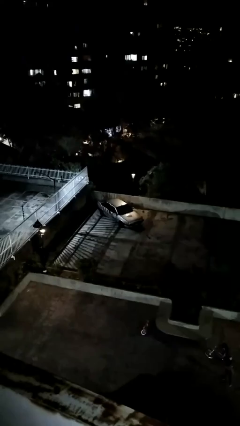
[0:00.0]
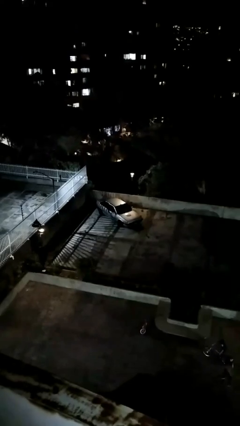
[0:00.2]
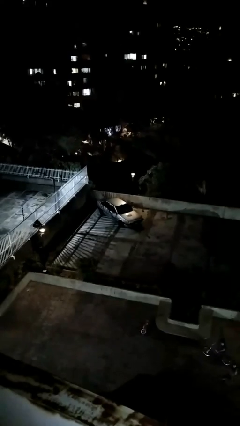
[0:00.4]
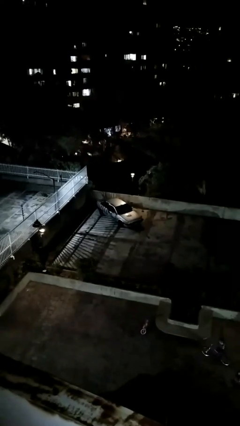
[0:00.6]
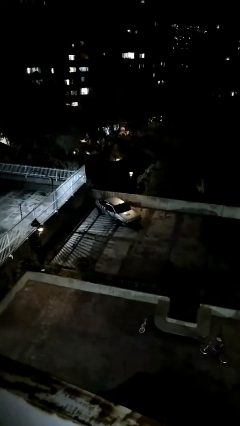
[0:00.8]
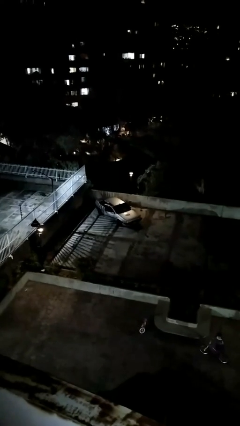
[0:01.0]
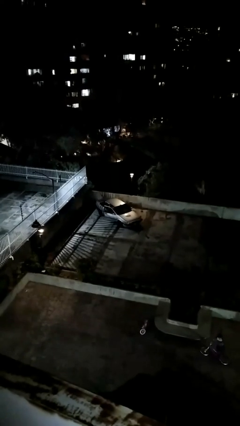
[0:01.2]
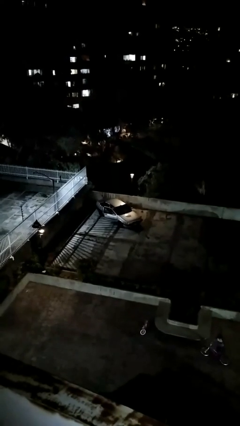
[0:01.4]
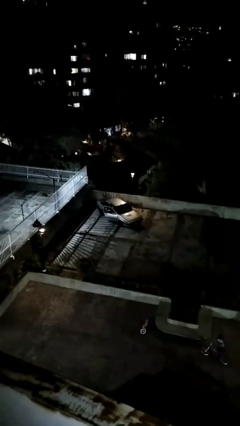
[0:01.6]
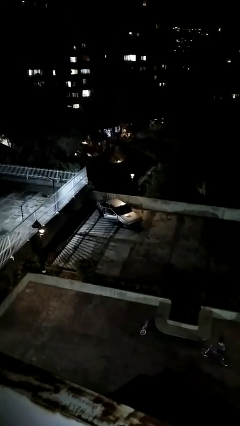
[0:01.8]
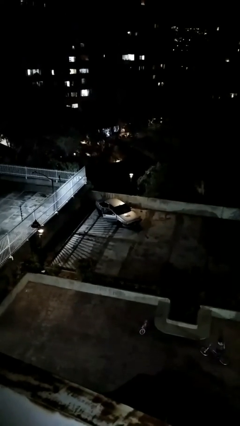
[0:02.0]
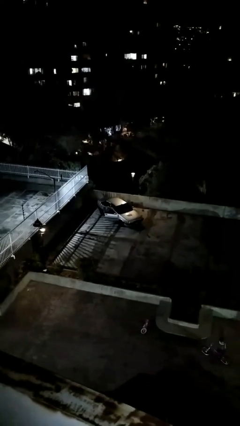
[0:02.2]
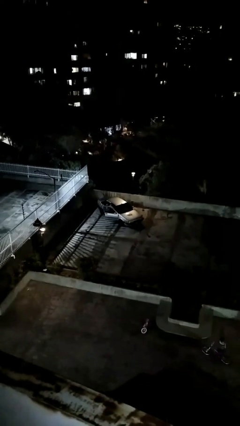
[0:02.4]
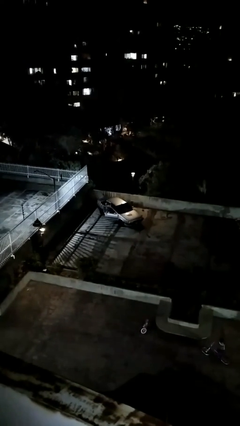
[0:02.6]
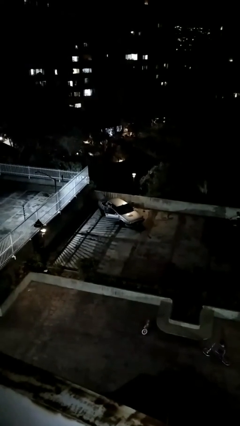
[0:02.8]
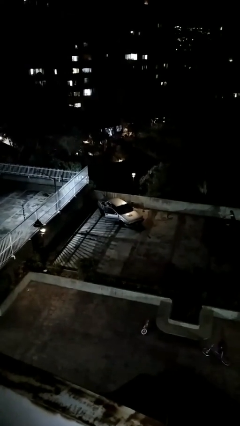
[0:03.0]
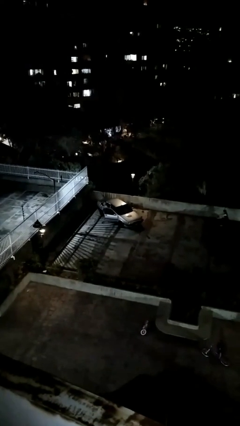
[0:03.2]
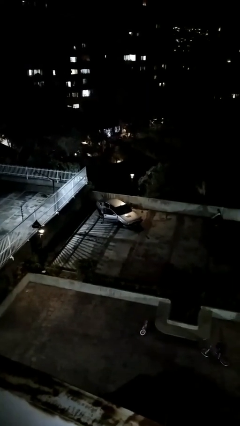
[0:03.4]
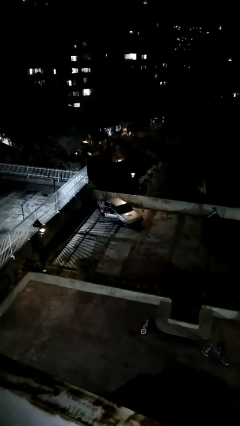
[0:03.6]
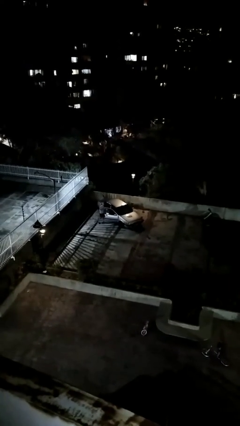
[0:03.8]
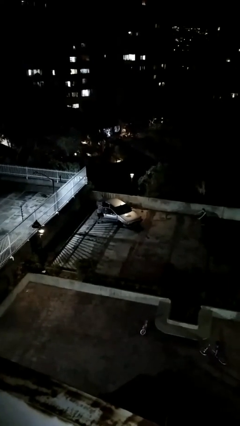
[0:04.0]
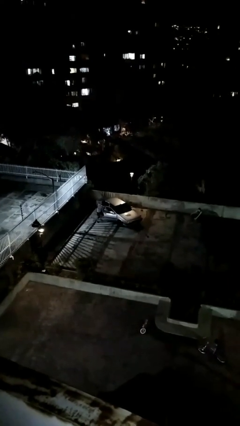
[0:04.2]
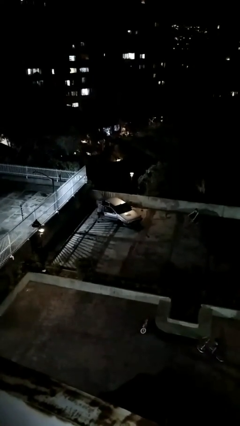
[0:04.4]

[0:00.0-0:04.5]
car drops off person

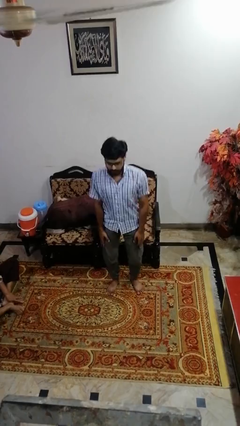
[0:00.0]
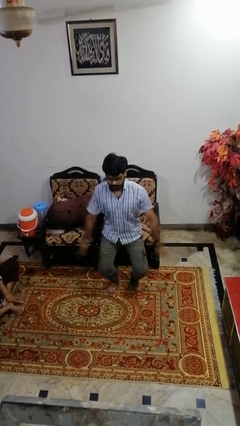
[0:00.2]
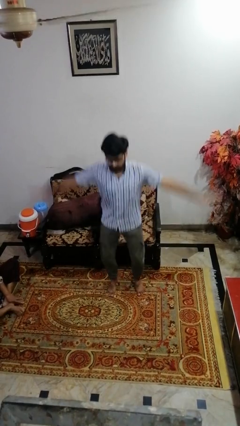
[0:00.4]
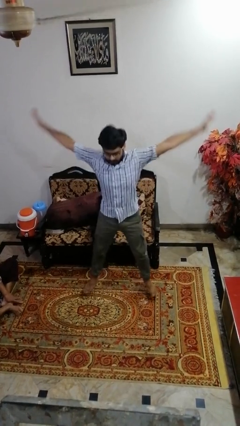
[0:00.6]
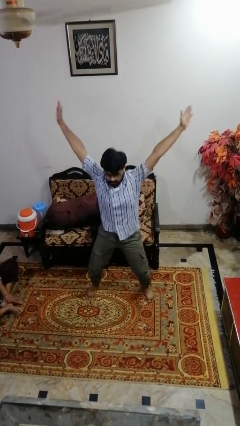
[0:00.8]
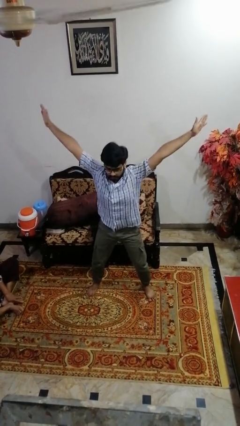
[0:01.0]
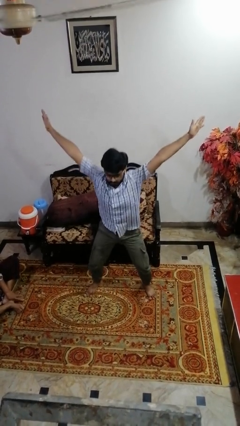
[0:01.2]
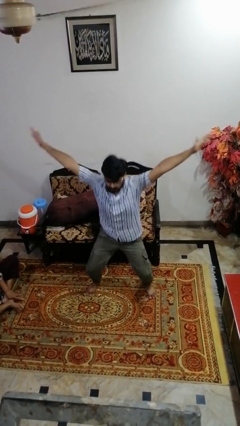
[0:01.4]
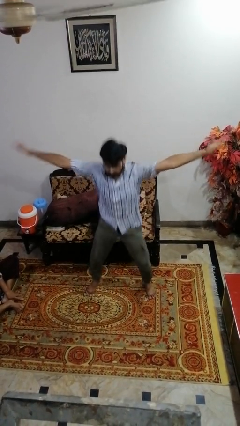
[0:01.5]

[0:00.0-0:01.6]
person exercises with jumping jacks

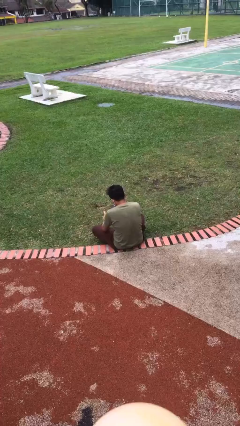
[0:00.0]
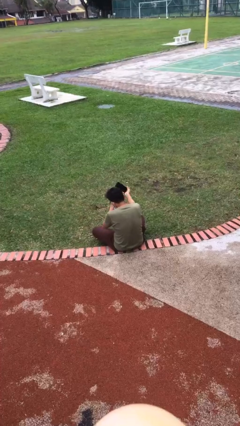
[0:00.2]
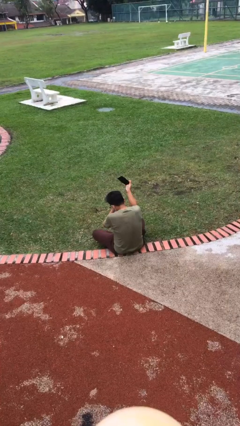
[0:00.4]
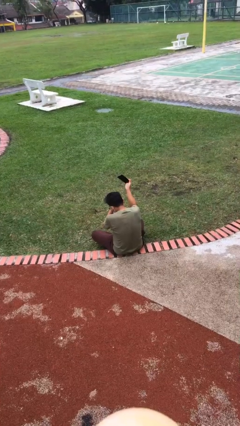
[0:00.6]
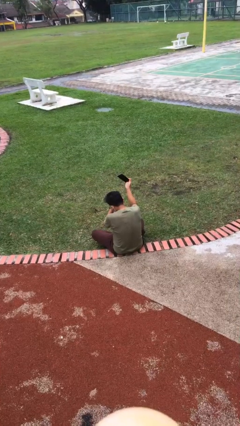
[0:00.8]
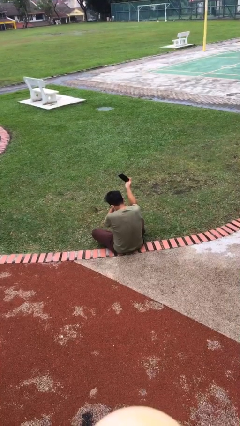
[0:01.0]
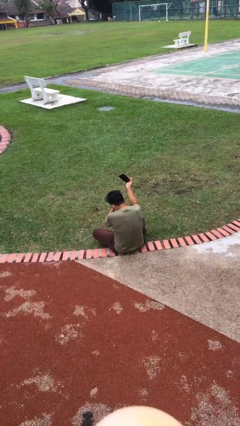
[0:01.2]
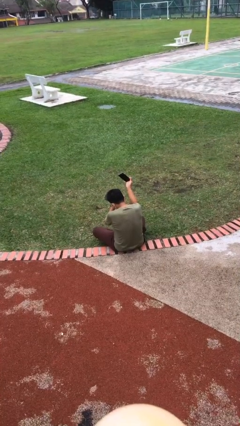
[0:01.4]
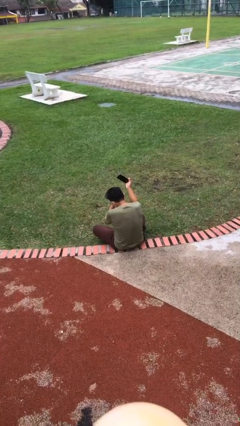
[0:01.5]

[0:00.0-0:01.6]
person takes selfie

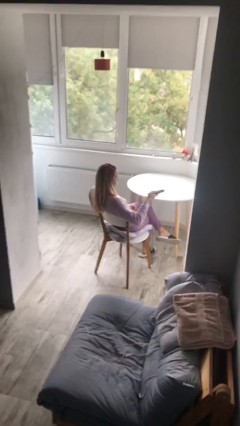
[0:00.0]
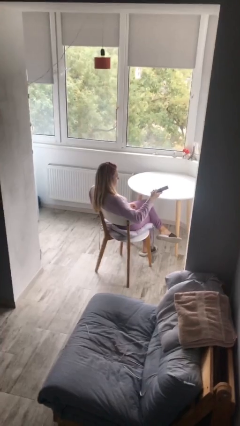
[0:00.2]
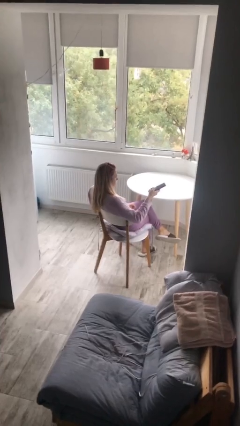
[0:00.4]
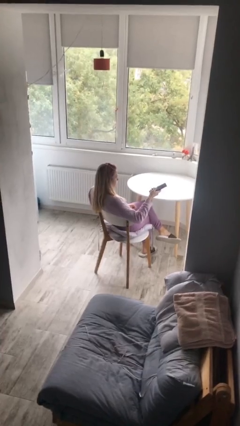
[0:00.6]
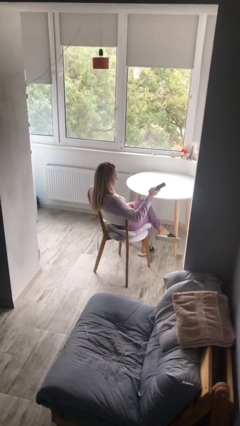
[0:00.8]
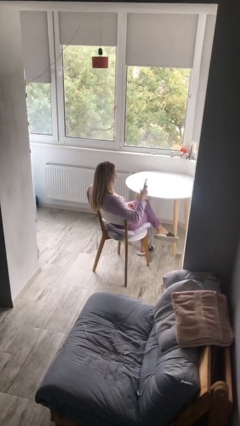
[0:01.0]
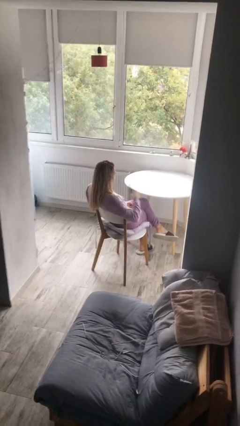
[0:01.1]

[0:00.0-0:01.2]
person uses television remote

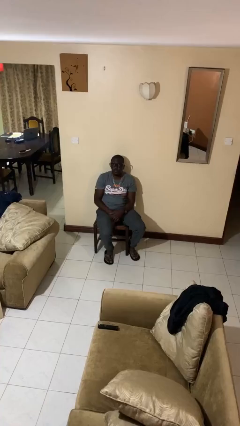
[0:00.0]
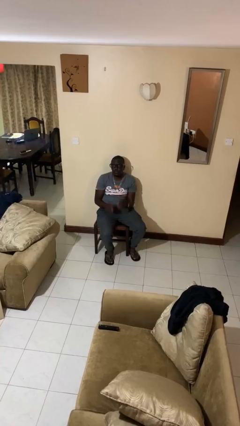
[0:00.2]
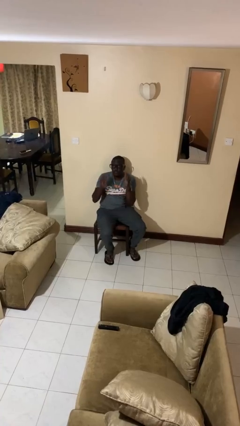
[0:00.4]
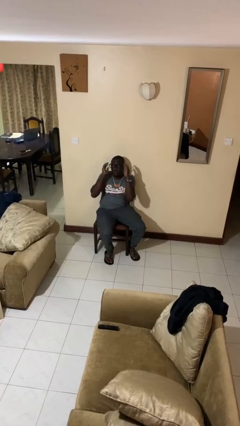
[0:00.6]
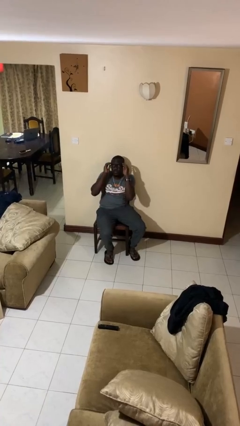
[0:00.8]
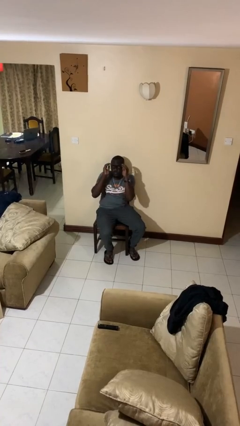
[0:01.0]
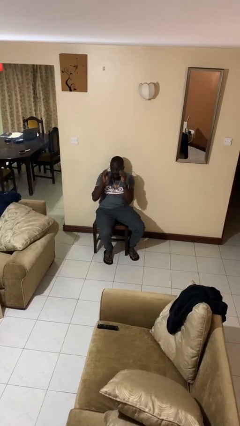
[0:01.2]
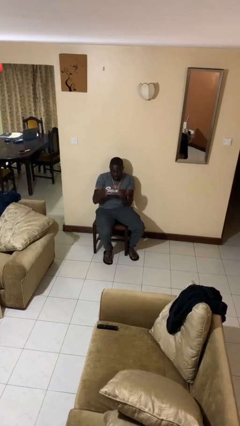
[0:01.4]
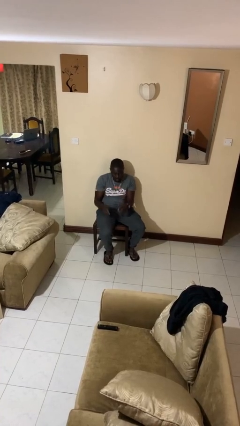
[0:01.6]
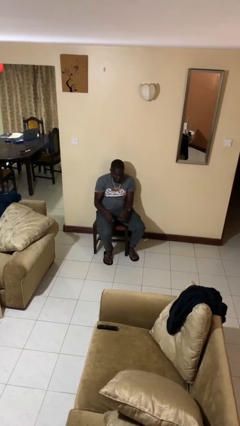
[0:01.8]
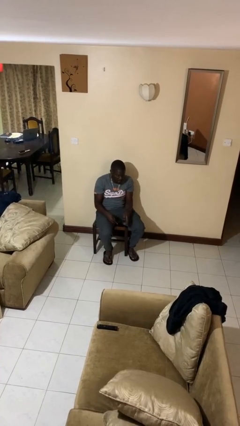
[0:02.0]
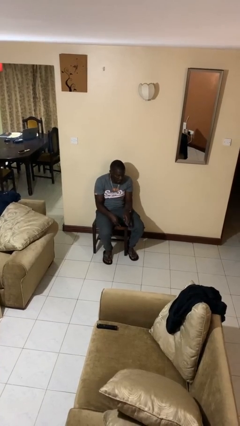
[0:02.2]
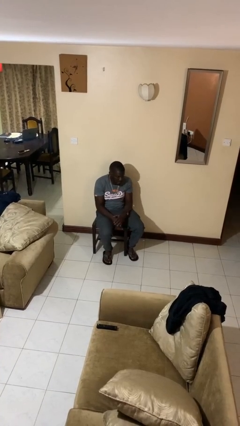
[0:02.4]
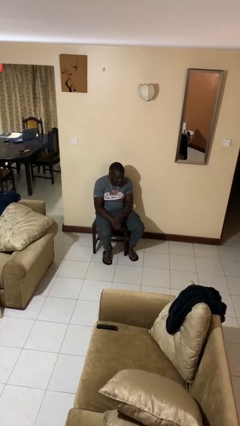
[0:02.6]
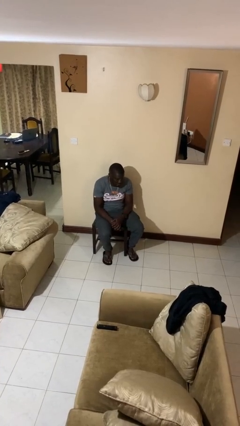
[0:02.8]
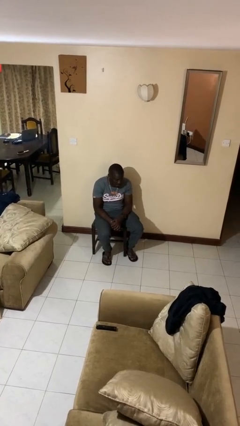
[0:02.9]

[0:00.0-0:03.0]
person takes off glasses

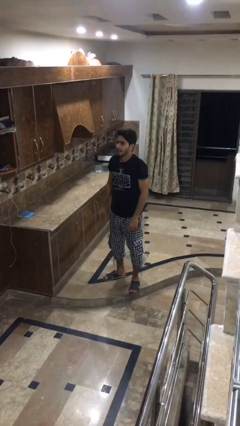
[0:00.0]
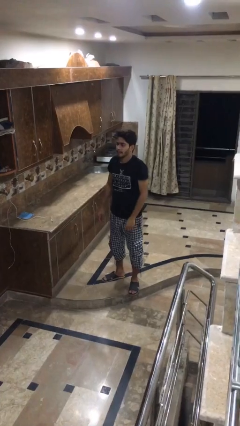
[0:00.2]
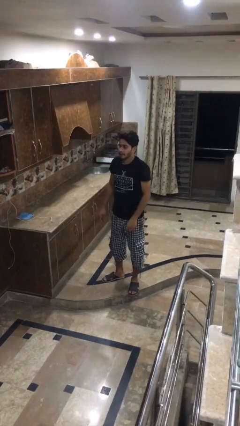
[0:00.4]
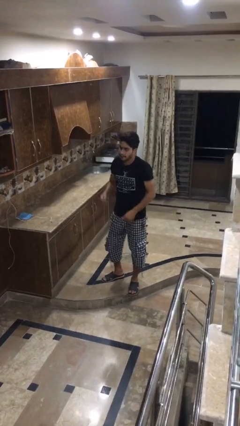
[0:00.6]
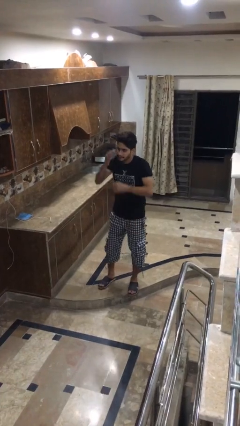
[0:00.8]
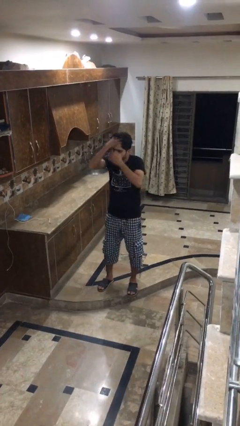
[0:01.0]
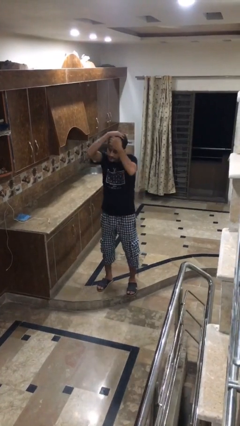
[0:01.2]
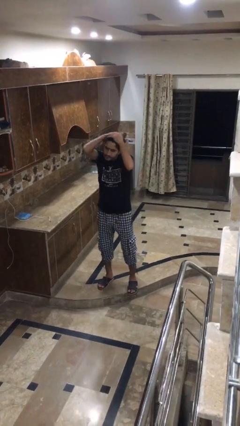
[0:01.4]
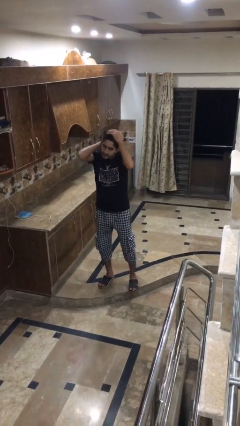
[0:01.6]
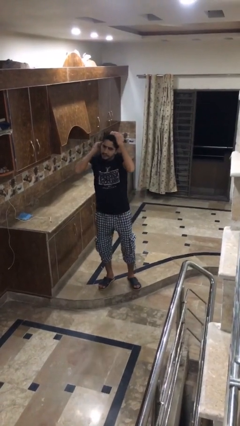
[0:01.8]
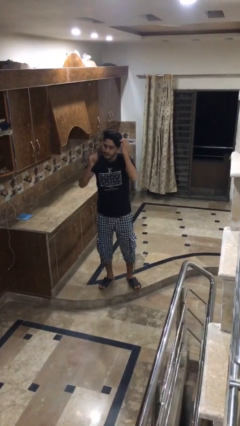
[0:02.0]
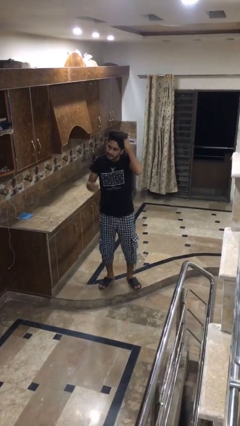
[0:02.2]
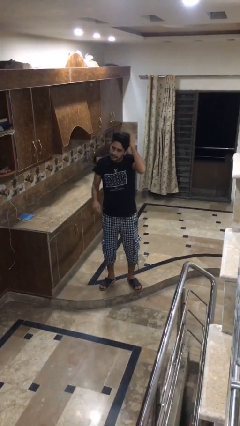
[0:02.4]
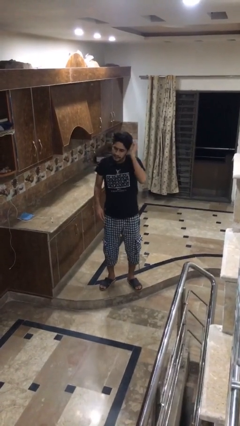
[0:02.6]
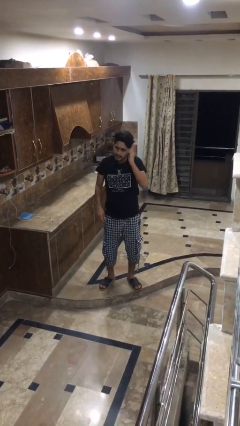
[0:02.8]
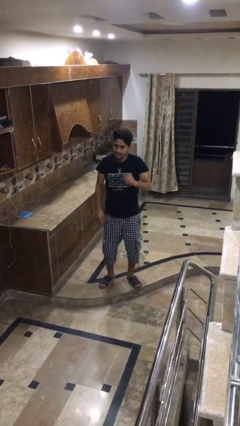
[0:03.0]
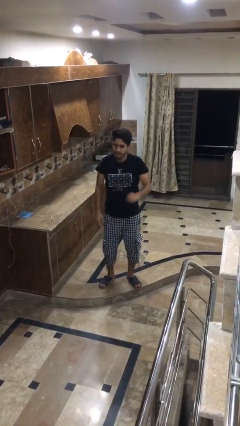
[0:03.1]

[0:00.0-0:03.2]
person strokes hair

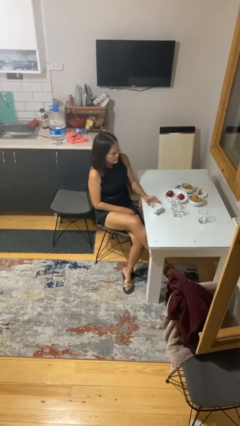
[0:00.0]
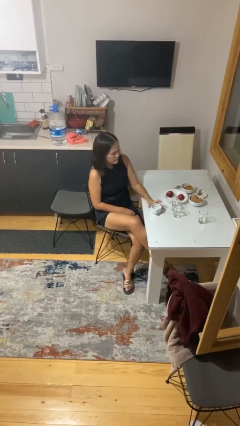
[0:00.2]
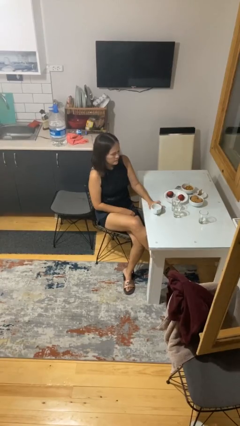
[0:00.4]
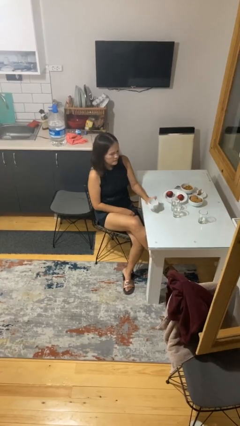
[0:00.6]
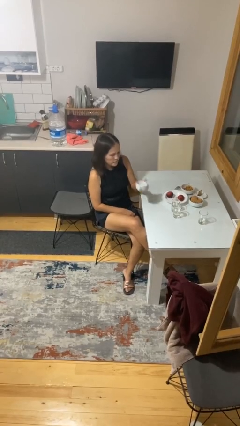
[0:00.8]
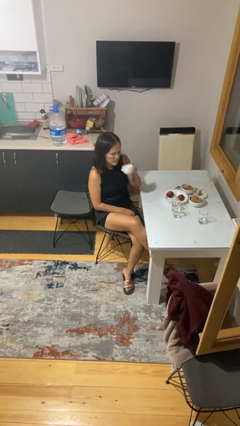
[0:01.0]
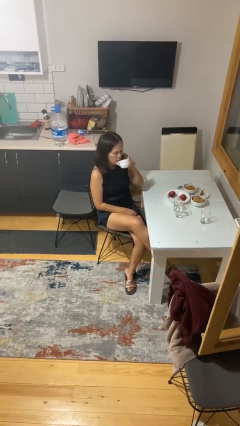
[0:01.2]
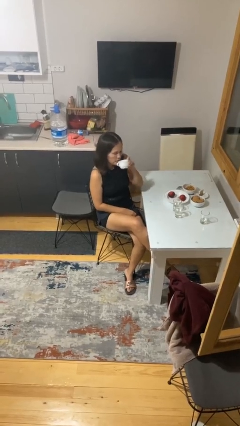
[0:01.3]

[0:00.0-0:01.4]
person picks up object from table

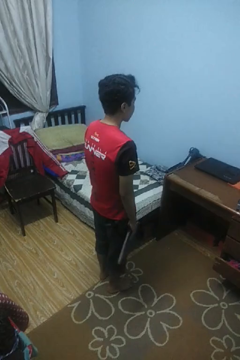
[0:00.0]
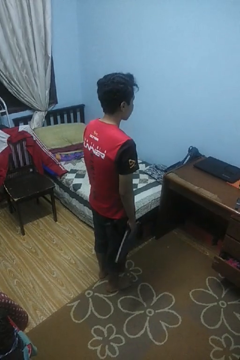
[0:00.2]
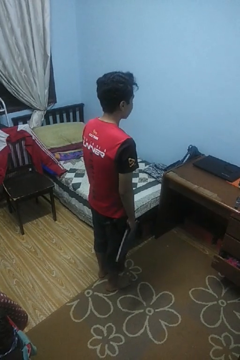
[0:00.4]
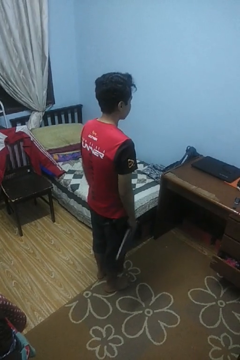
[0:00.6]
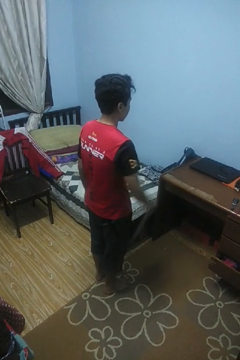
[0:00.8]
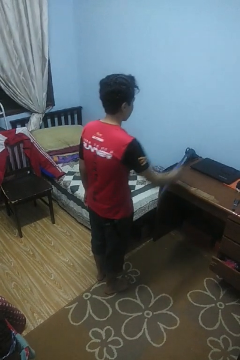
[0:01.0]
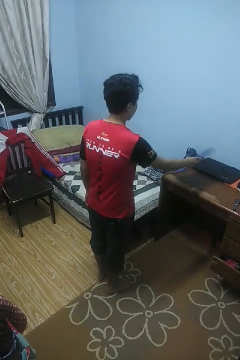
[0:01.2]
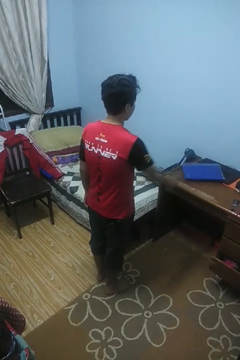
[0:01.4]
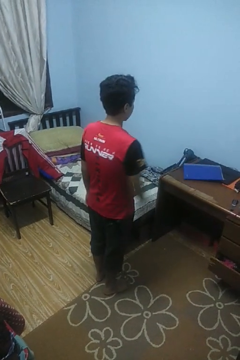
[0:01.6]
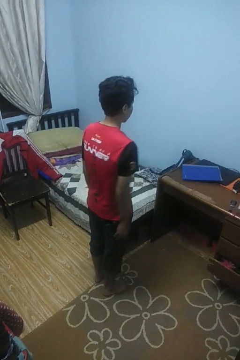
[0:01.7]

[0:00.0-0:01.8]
person throws object on table
